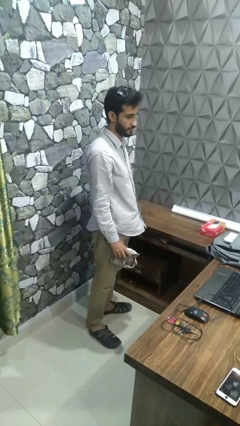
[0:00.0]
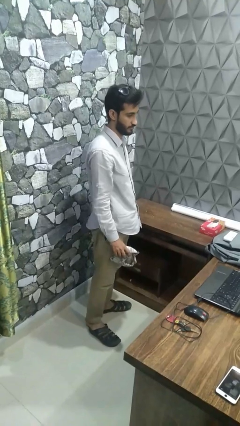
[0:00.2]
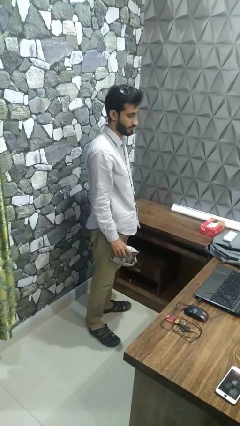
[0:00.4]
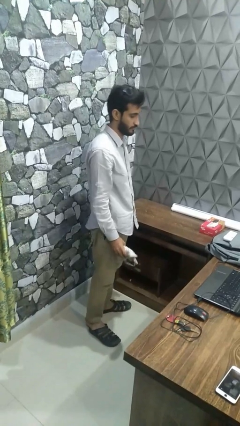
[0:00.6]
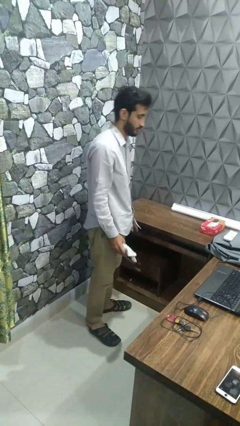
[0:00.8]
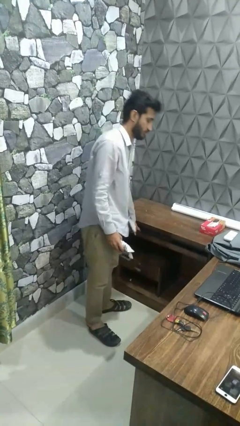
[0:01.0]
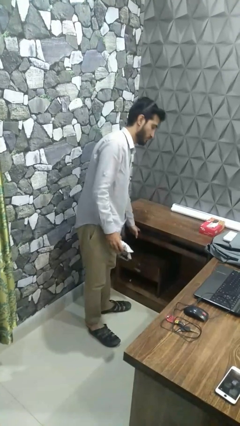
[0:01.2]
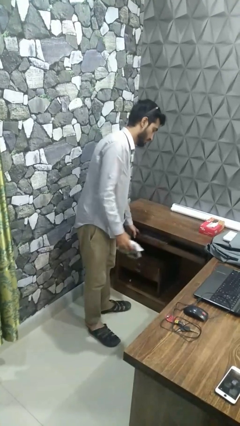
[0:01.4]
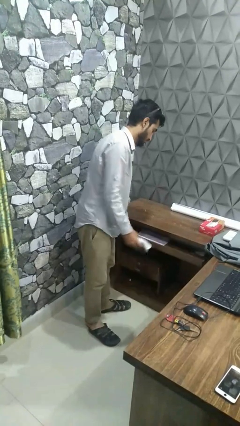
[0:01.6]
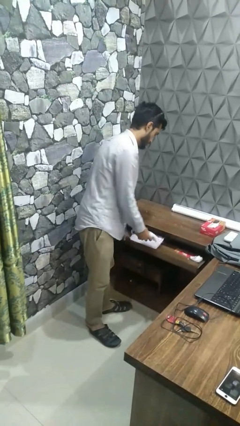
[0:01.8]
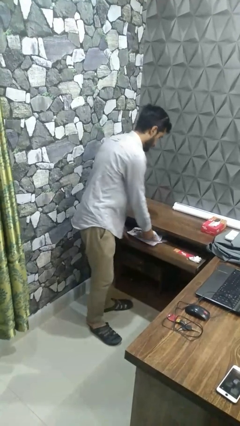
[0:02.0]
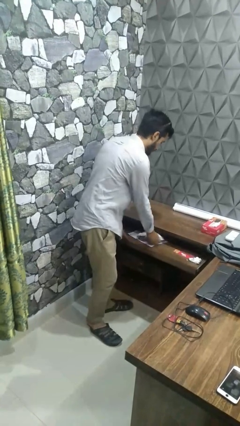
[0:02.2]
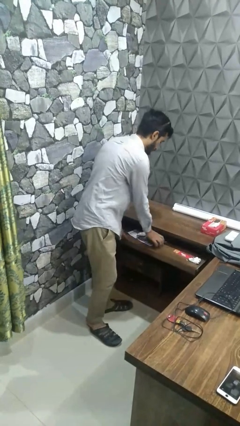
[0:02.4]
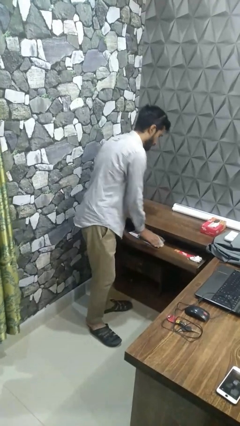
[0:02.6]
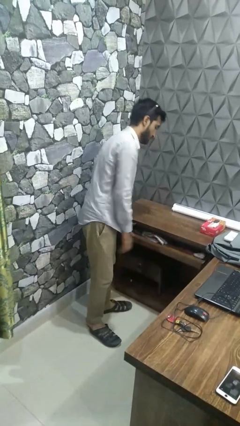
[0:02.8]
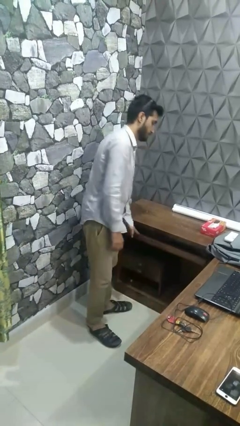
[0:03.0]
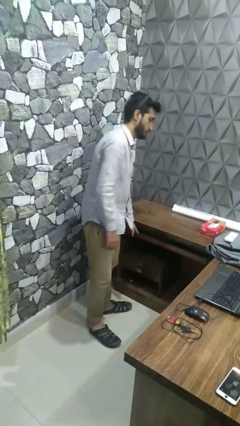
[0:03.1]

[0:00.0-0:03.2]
person puts clothes into dresser

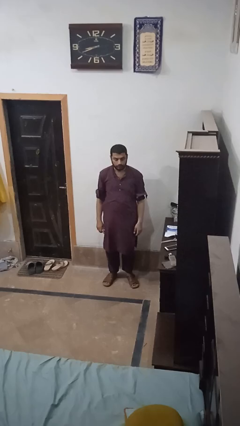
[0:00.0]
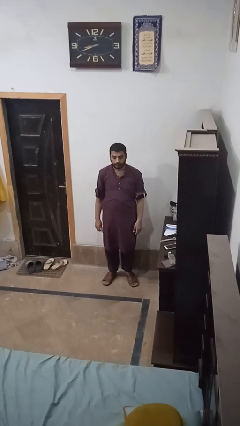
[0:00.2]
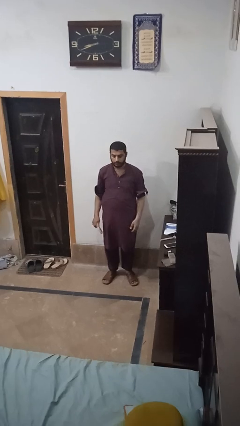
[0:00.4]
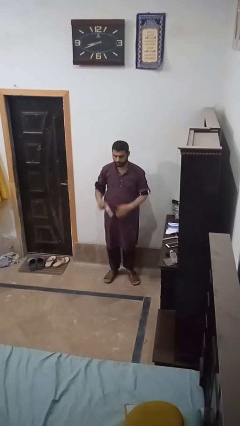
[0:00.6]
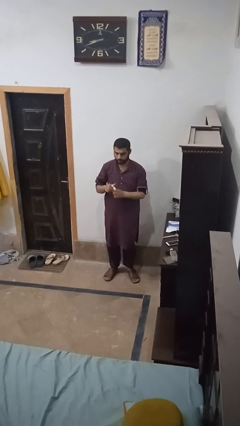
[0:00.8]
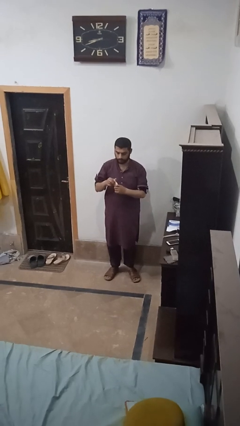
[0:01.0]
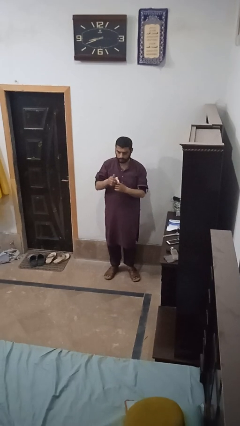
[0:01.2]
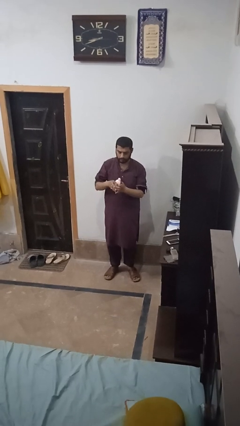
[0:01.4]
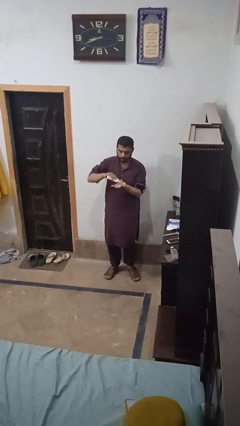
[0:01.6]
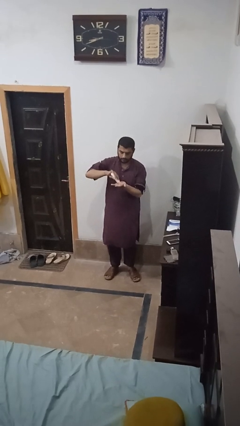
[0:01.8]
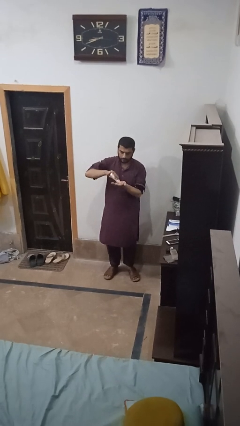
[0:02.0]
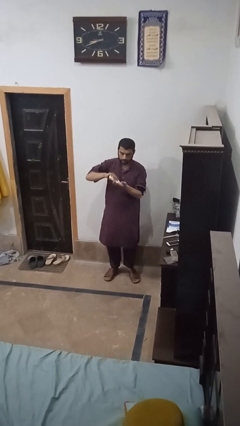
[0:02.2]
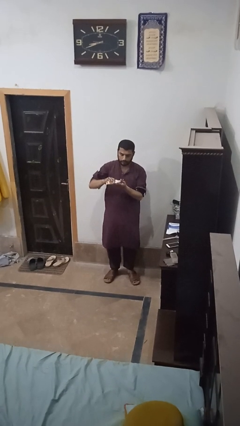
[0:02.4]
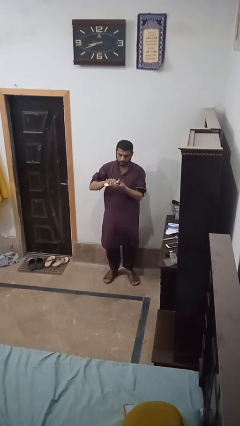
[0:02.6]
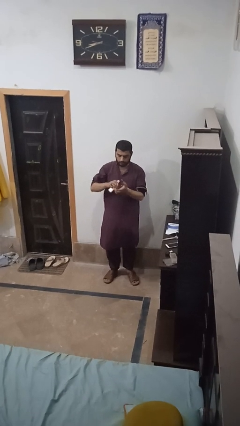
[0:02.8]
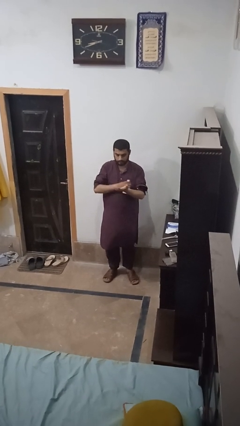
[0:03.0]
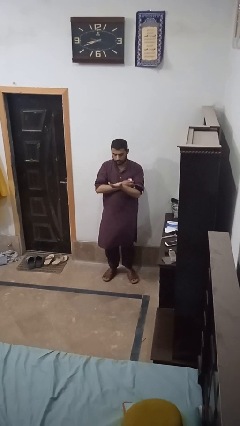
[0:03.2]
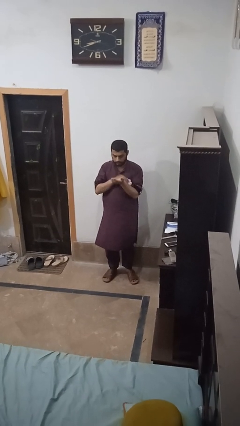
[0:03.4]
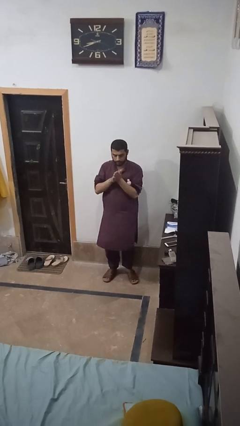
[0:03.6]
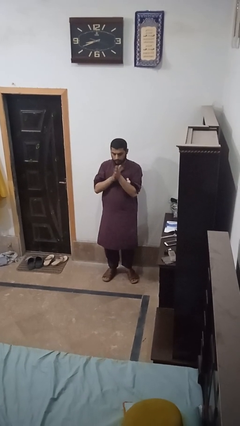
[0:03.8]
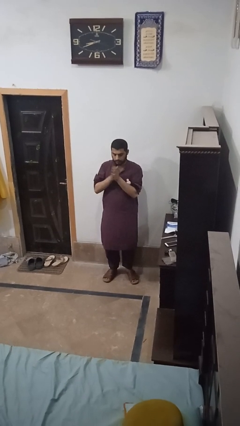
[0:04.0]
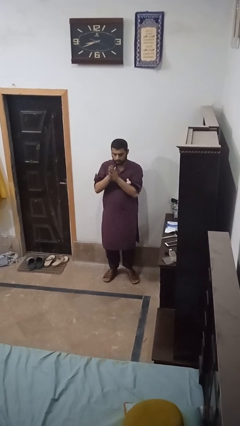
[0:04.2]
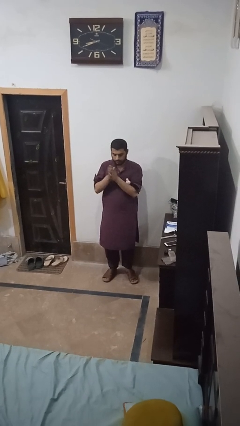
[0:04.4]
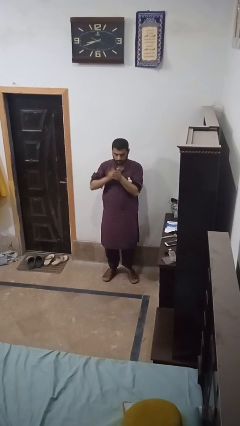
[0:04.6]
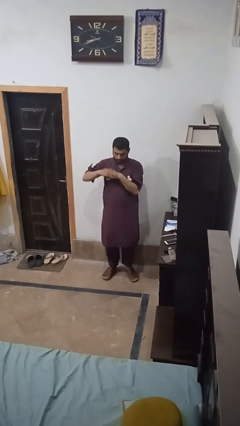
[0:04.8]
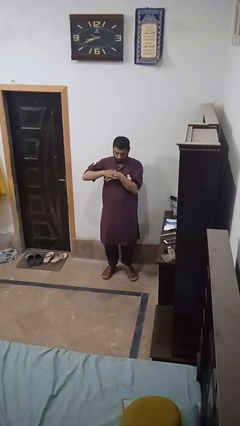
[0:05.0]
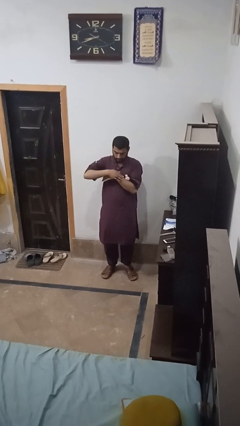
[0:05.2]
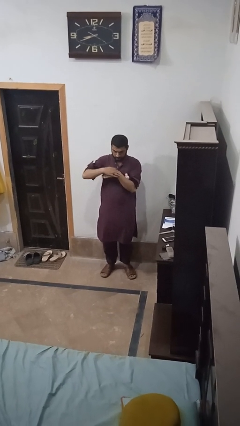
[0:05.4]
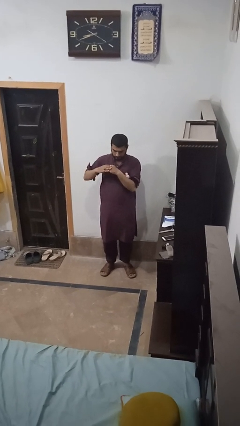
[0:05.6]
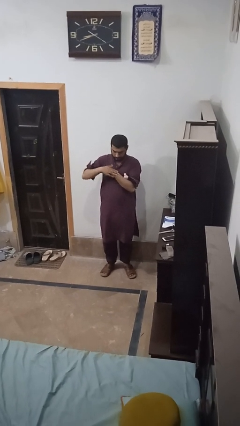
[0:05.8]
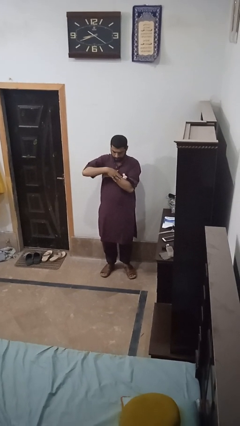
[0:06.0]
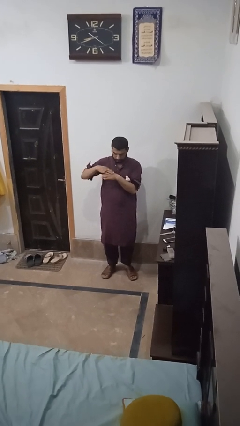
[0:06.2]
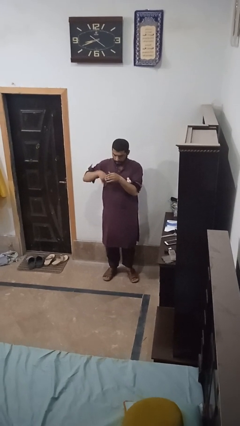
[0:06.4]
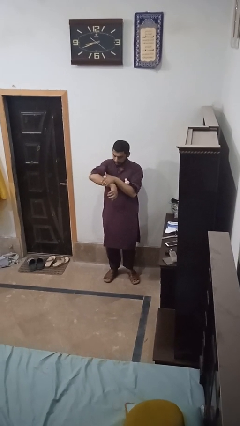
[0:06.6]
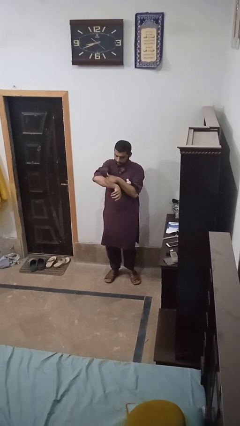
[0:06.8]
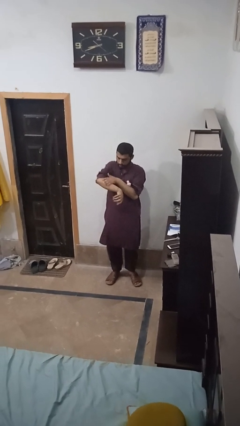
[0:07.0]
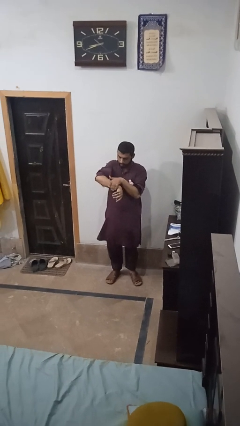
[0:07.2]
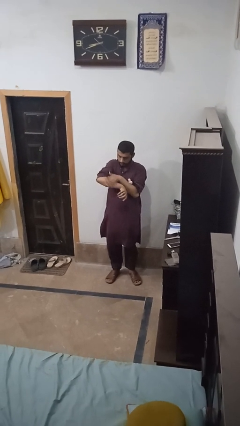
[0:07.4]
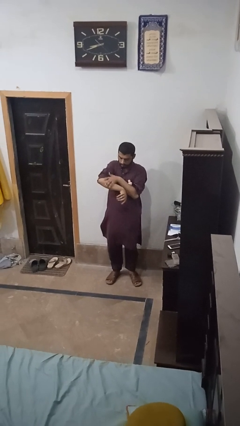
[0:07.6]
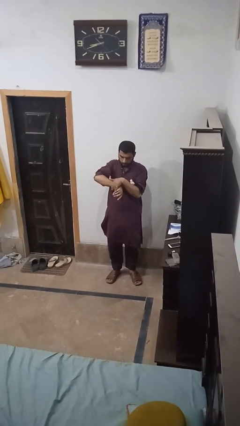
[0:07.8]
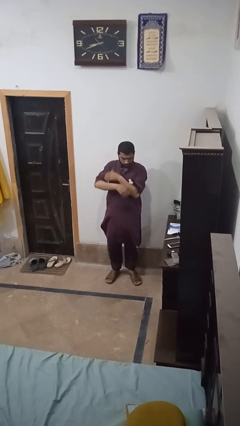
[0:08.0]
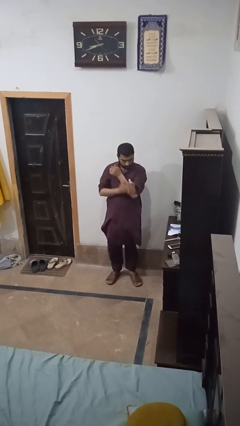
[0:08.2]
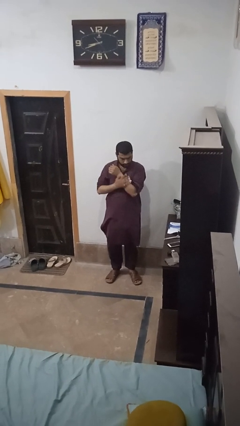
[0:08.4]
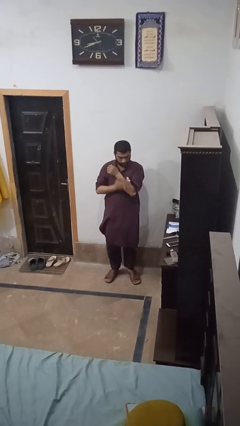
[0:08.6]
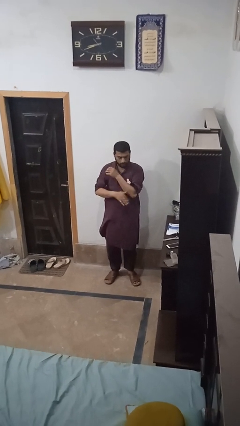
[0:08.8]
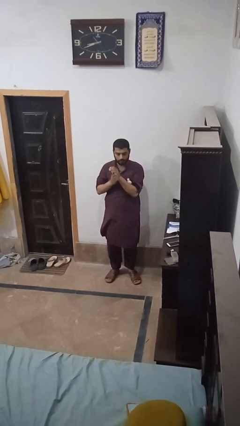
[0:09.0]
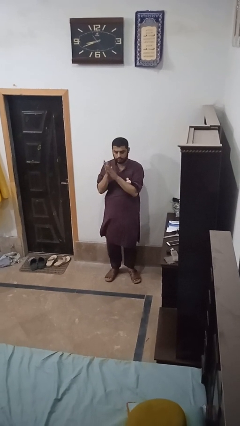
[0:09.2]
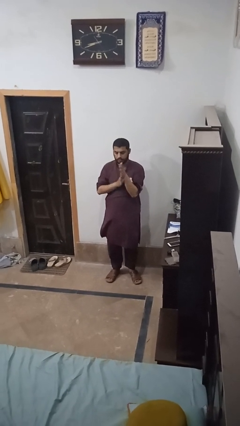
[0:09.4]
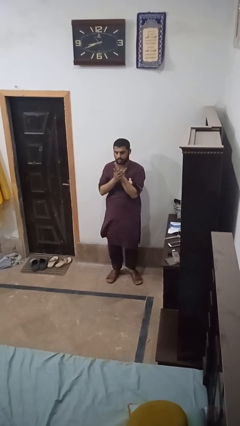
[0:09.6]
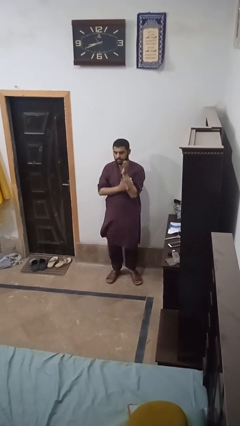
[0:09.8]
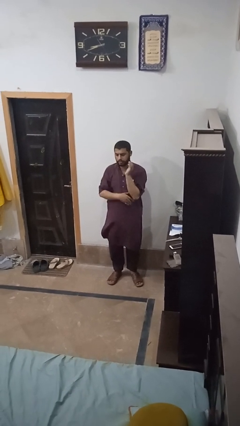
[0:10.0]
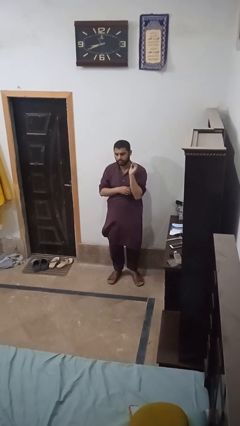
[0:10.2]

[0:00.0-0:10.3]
person applies sunscreen

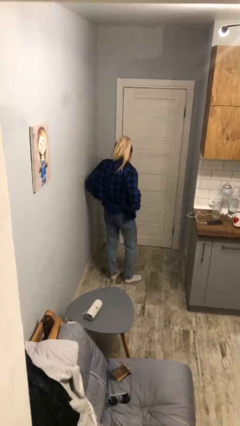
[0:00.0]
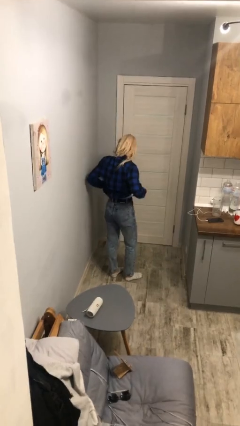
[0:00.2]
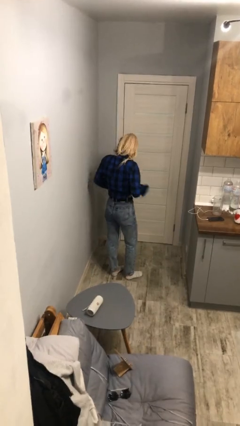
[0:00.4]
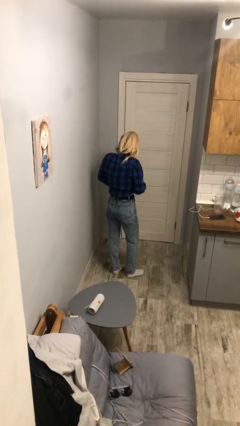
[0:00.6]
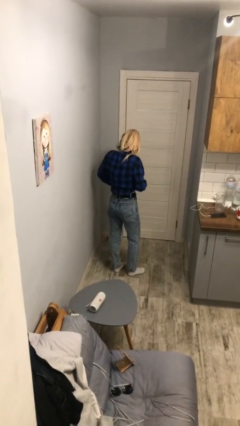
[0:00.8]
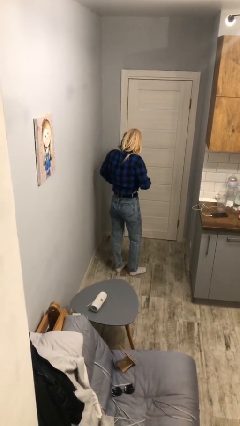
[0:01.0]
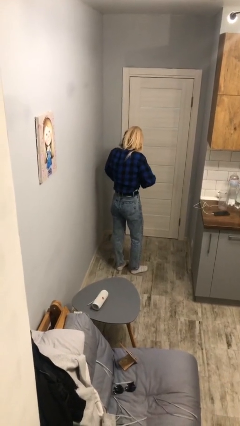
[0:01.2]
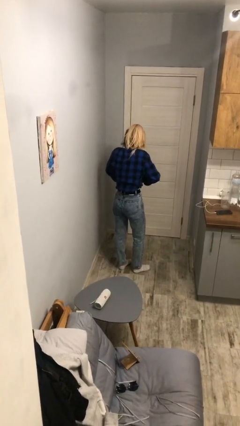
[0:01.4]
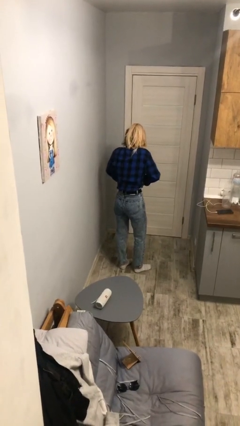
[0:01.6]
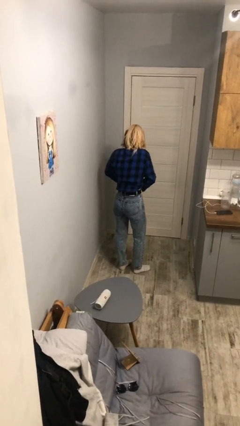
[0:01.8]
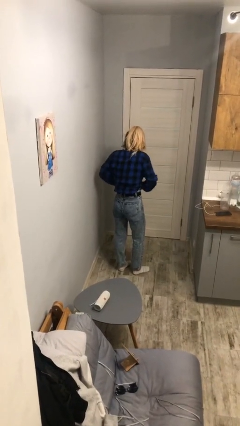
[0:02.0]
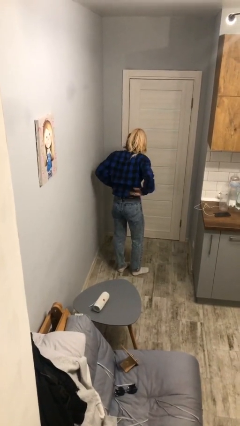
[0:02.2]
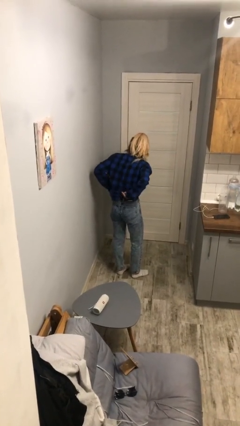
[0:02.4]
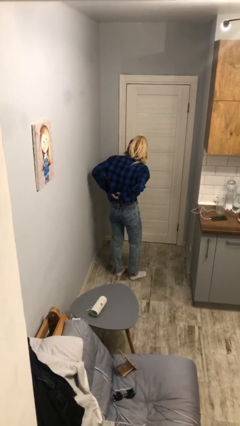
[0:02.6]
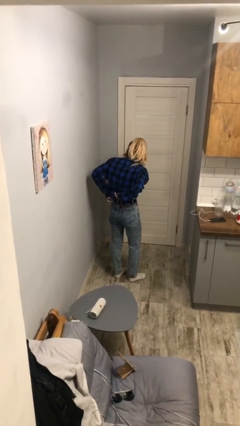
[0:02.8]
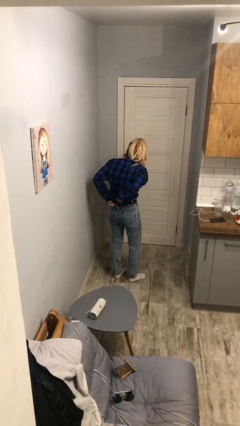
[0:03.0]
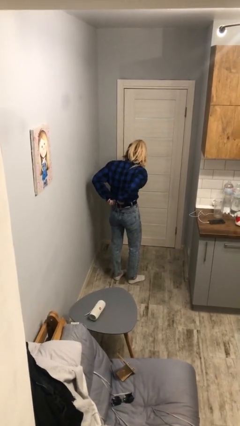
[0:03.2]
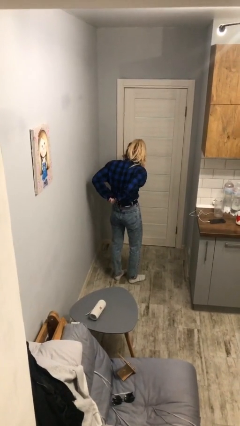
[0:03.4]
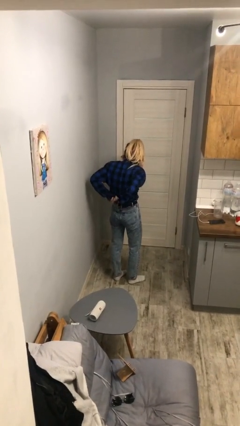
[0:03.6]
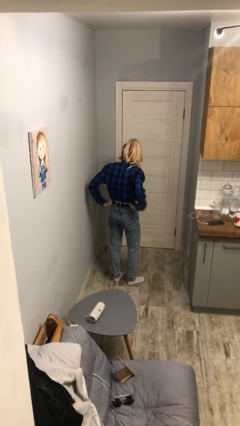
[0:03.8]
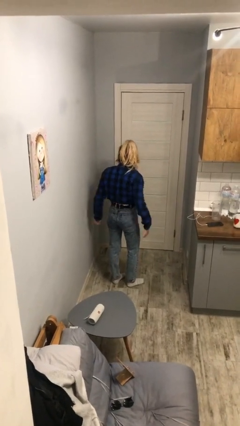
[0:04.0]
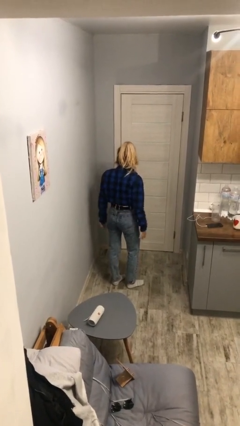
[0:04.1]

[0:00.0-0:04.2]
person tucks in shirt

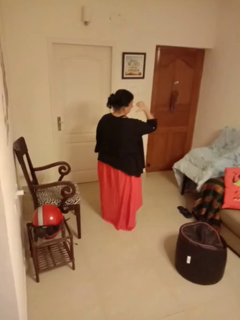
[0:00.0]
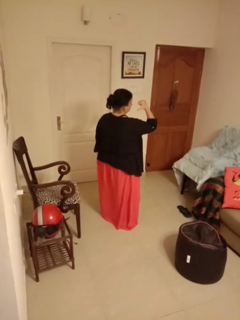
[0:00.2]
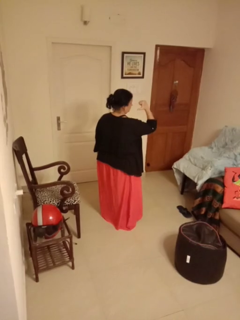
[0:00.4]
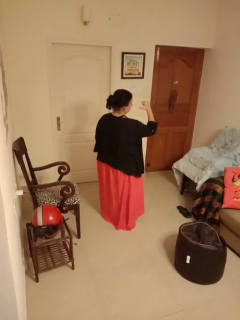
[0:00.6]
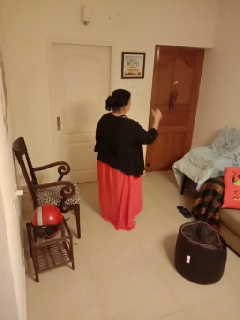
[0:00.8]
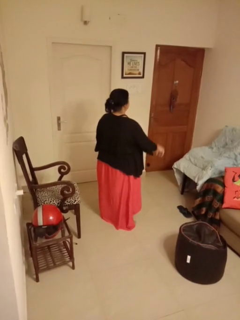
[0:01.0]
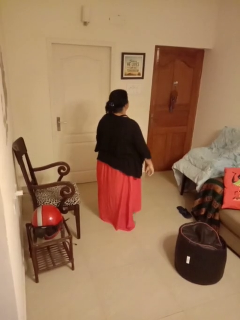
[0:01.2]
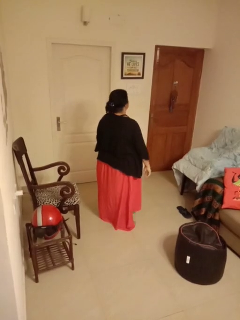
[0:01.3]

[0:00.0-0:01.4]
person gestures behind me
